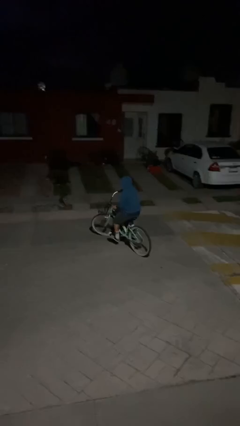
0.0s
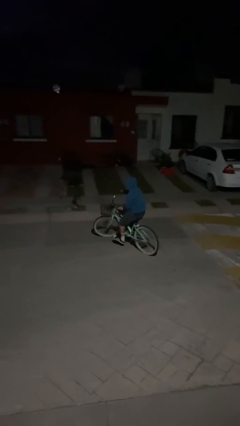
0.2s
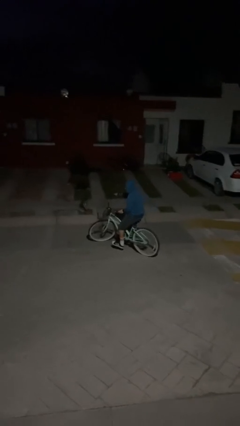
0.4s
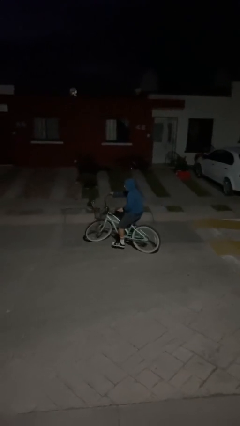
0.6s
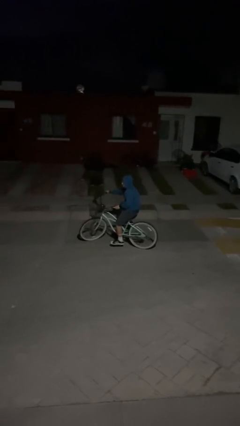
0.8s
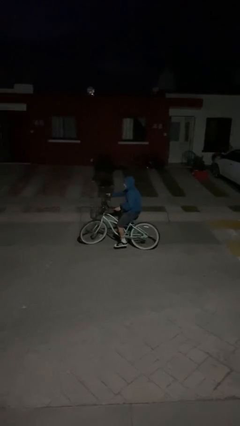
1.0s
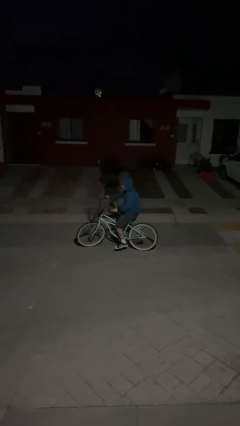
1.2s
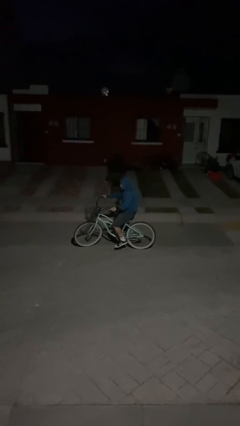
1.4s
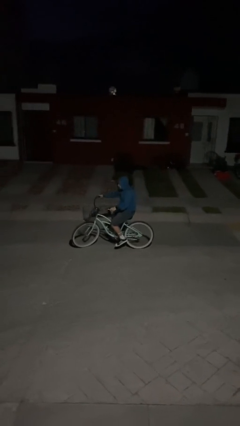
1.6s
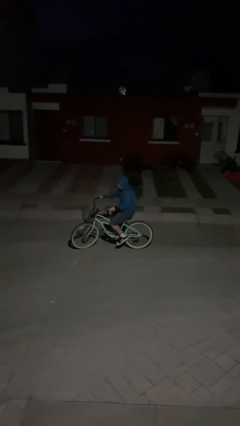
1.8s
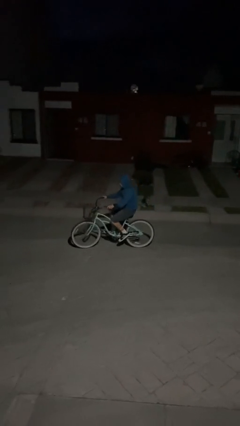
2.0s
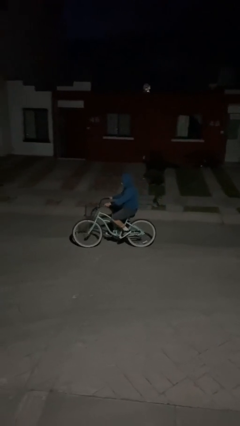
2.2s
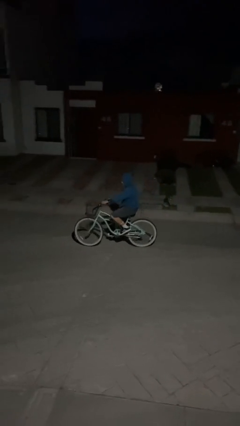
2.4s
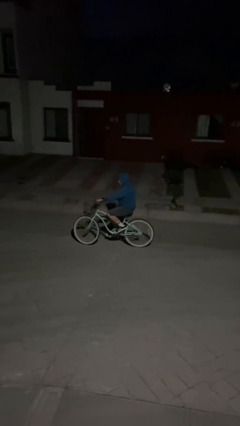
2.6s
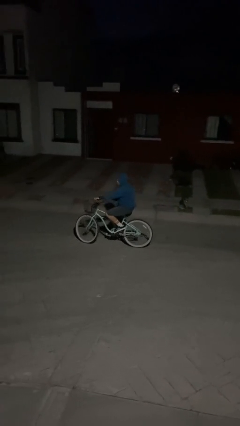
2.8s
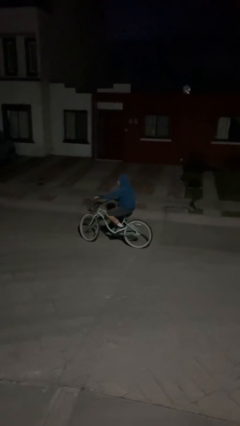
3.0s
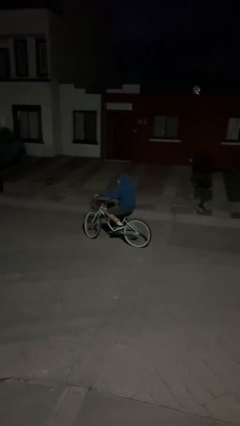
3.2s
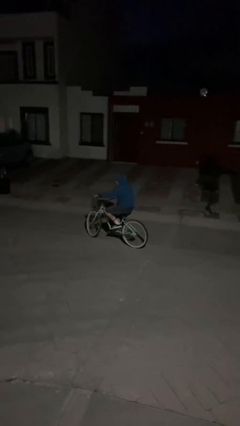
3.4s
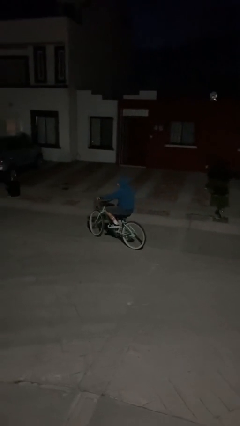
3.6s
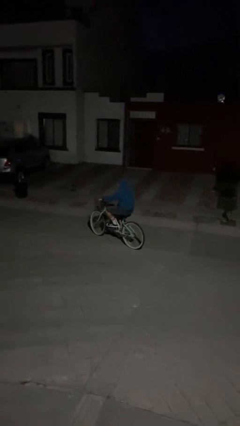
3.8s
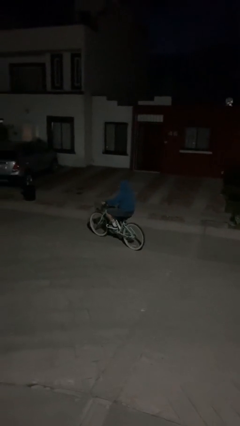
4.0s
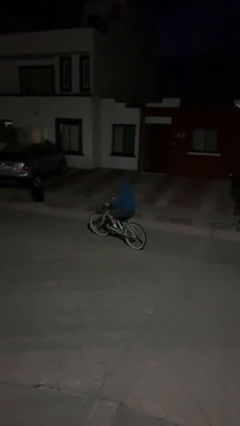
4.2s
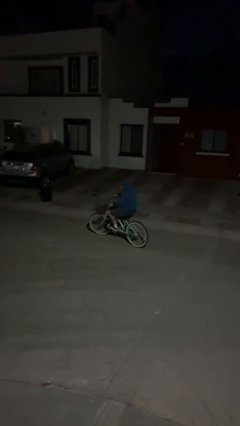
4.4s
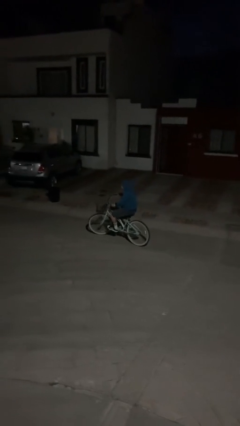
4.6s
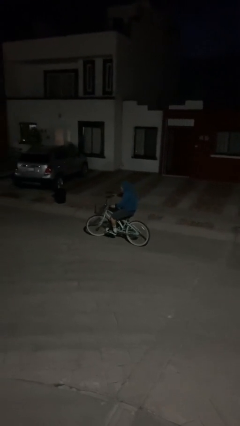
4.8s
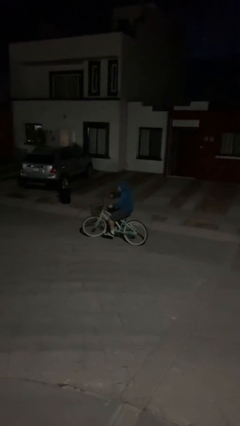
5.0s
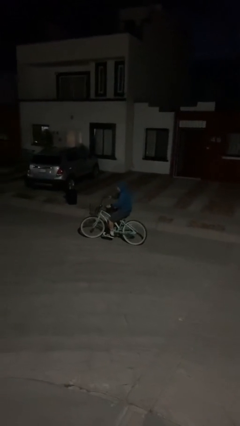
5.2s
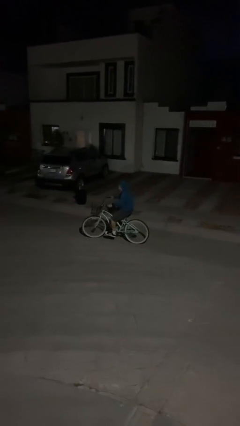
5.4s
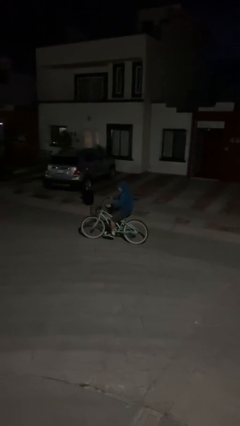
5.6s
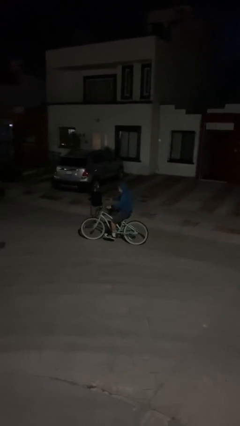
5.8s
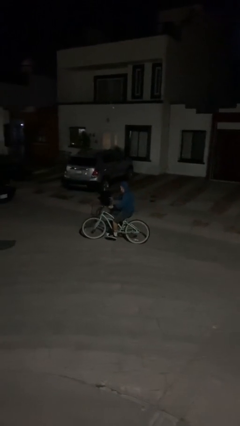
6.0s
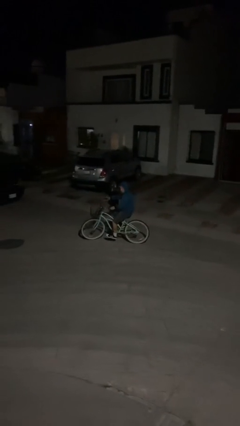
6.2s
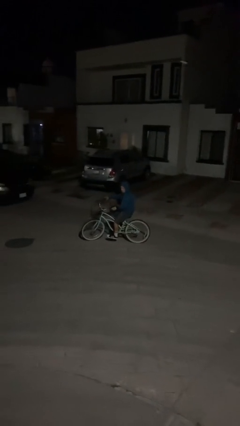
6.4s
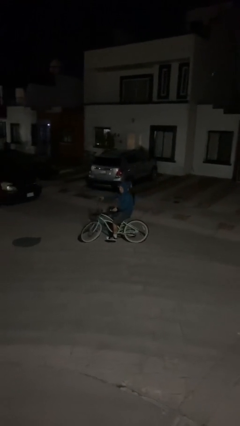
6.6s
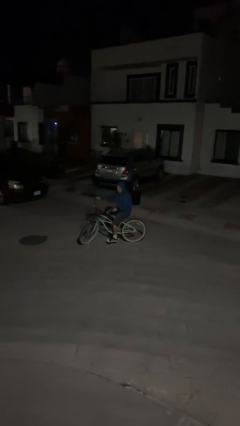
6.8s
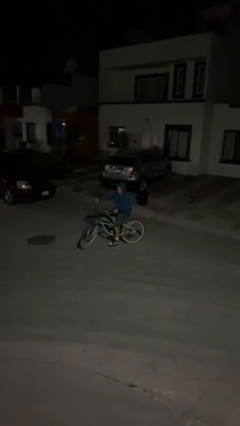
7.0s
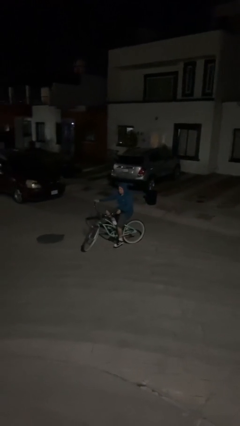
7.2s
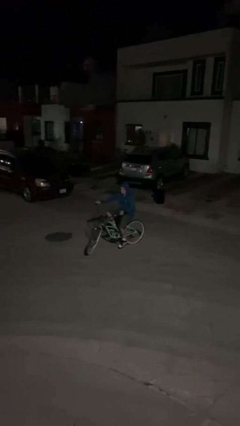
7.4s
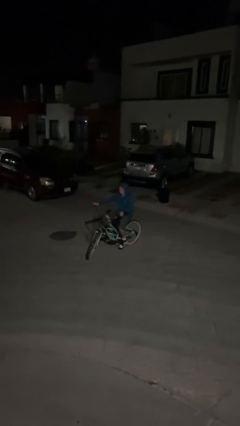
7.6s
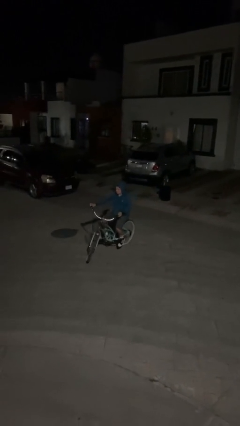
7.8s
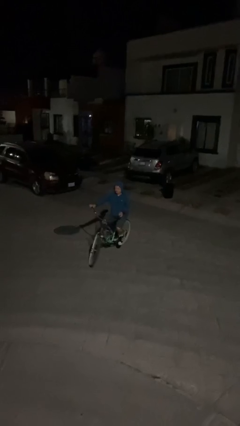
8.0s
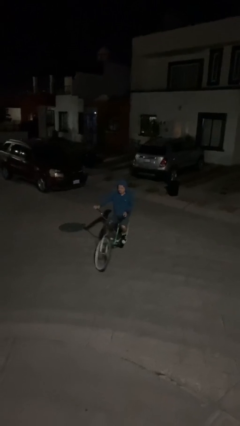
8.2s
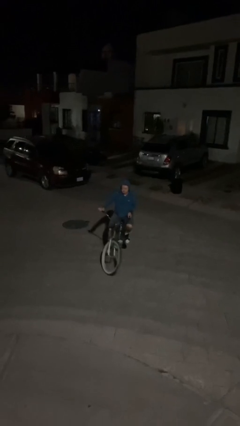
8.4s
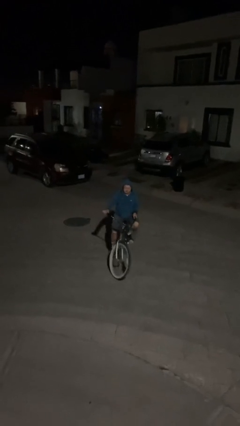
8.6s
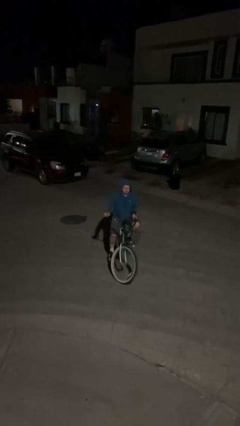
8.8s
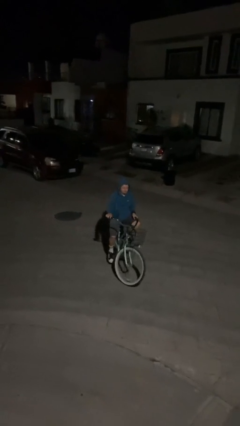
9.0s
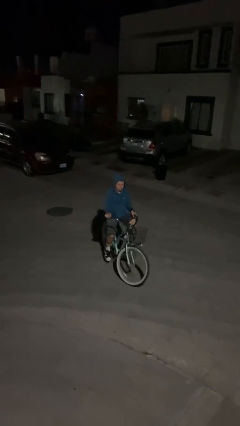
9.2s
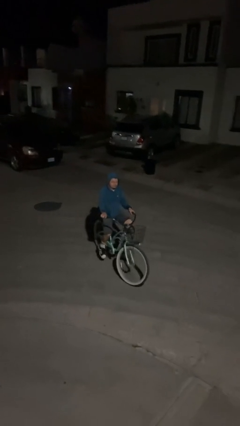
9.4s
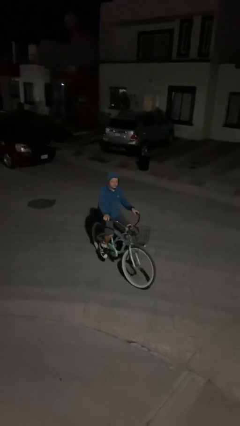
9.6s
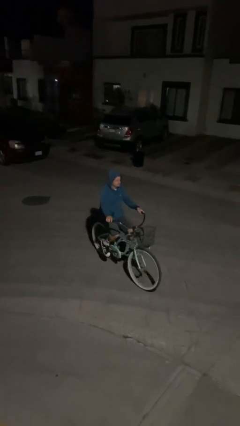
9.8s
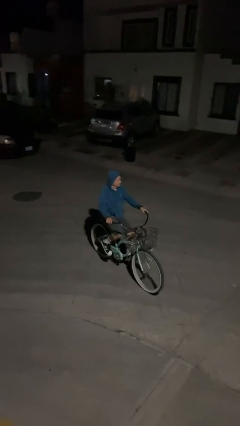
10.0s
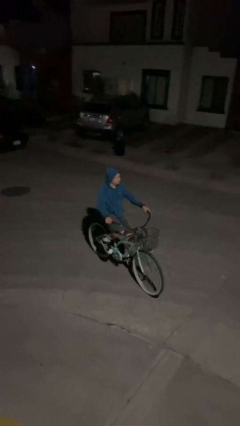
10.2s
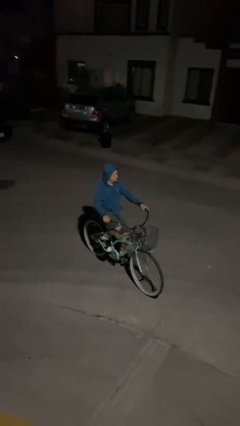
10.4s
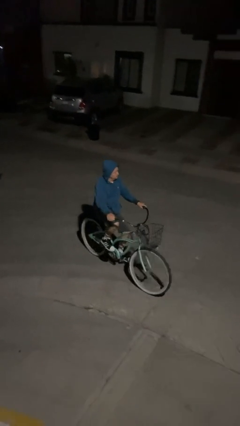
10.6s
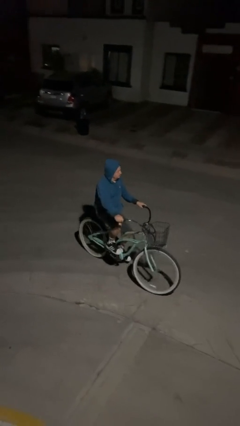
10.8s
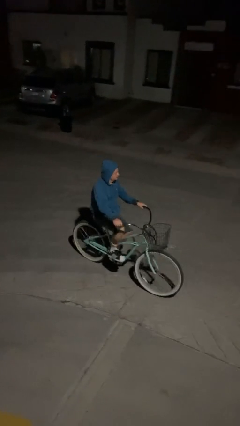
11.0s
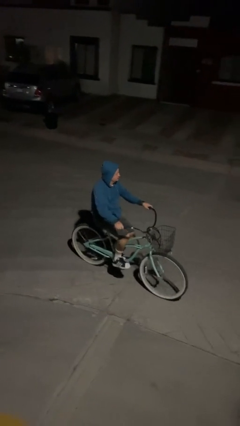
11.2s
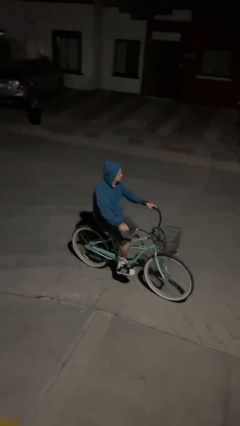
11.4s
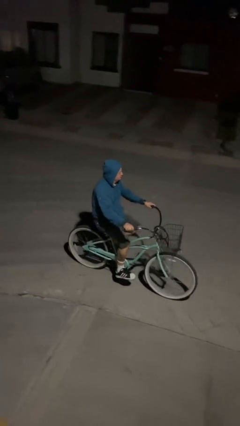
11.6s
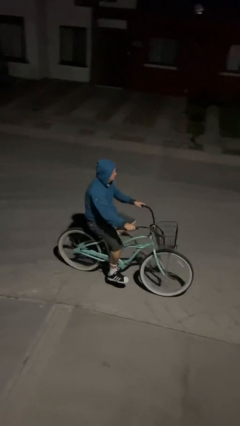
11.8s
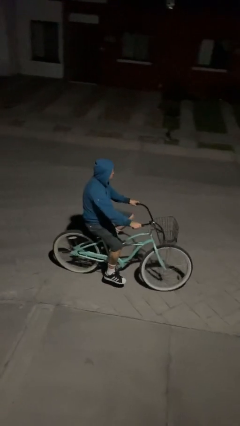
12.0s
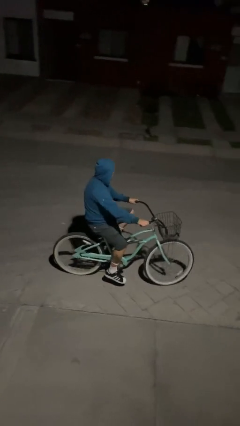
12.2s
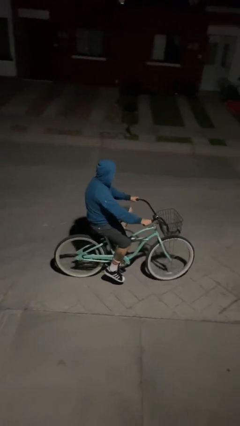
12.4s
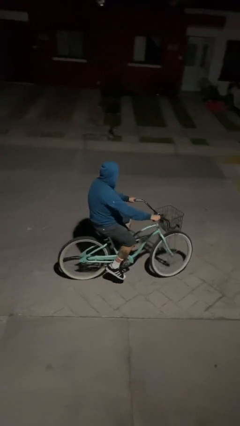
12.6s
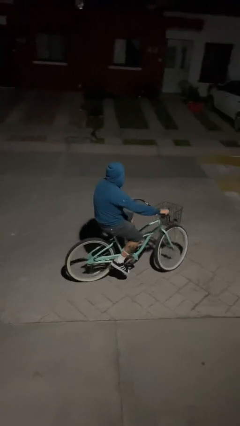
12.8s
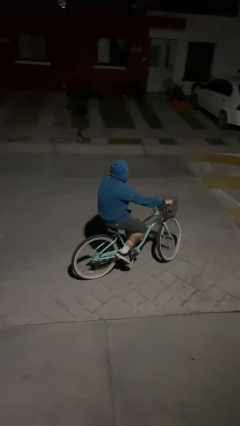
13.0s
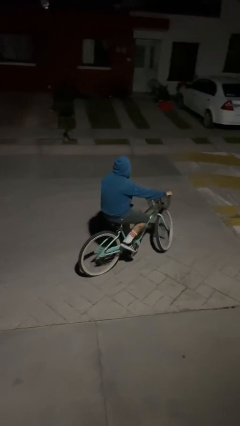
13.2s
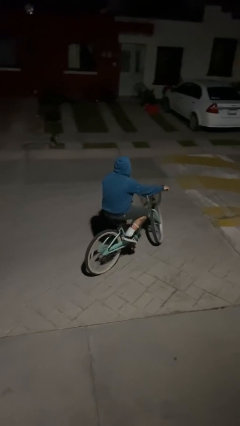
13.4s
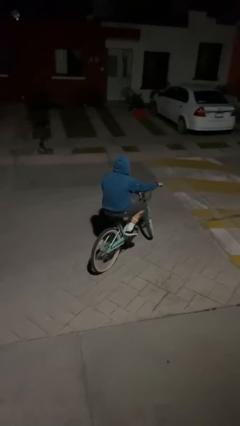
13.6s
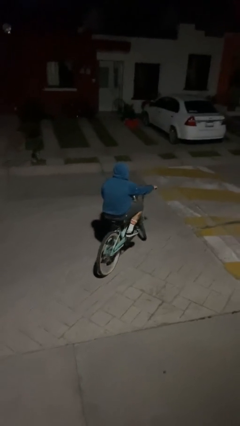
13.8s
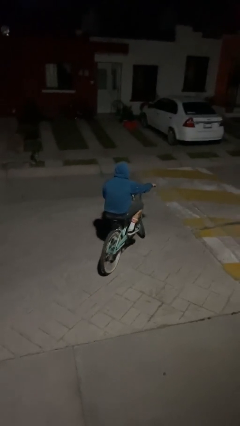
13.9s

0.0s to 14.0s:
person rides bicycle

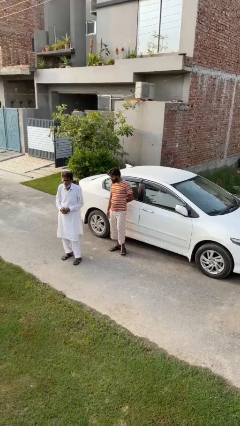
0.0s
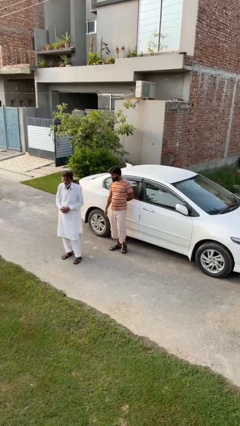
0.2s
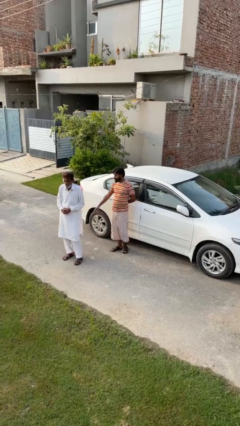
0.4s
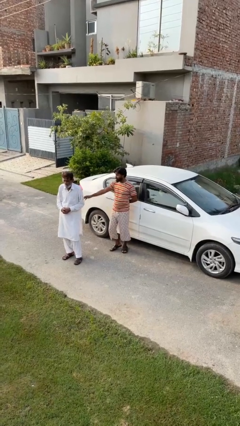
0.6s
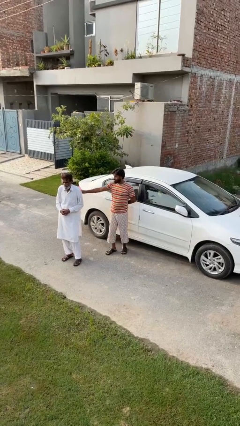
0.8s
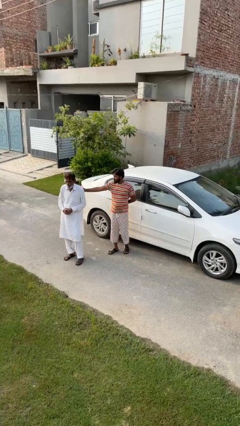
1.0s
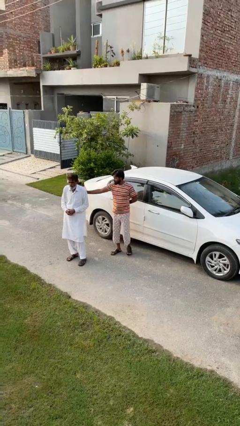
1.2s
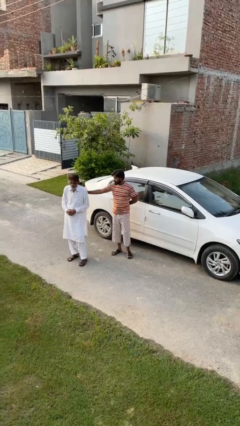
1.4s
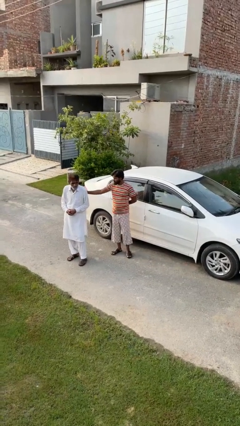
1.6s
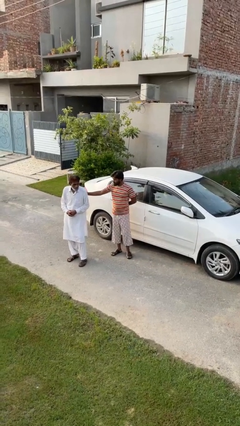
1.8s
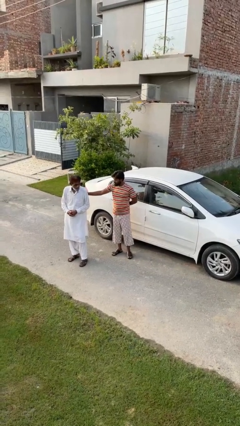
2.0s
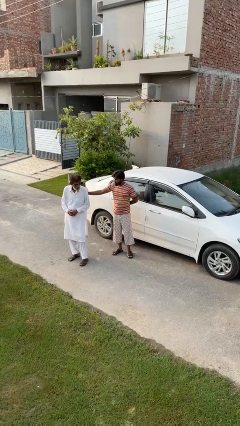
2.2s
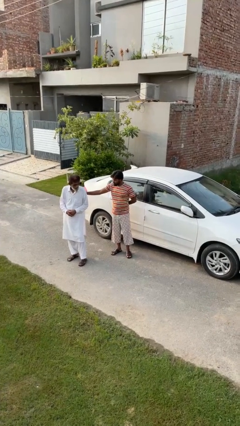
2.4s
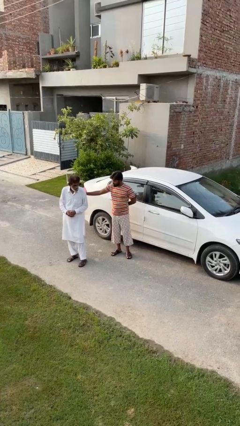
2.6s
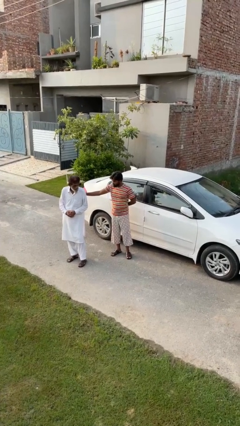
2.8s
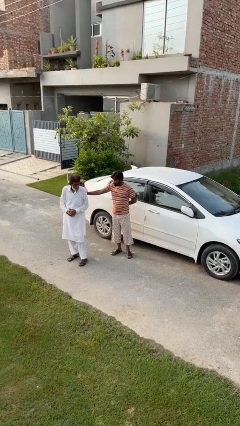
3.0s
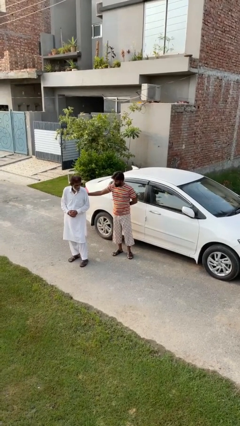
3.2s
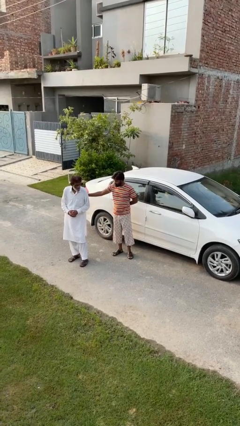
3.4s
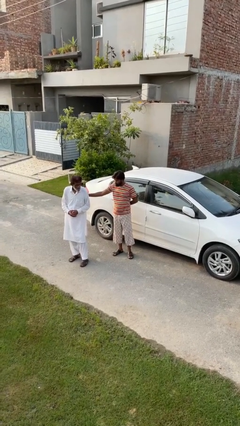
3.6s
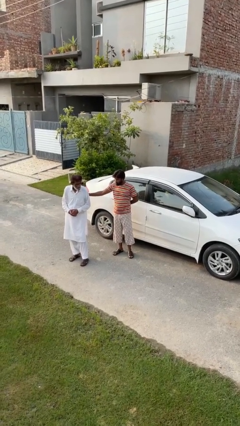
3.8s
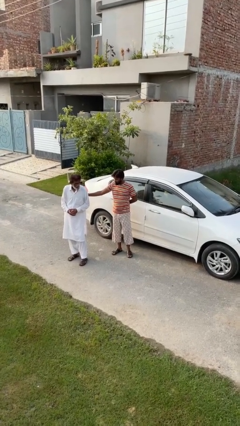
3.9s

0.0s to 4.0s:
person touches back of person
